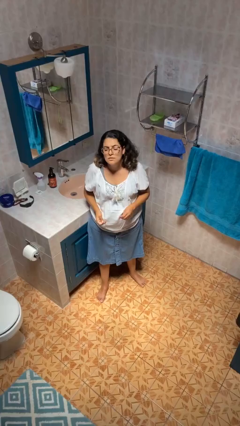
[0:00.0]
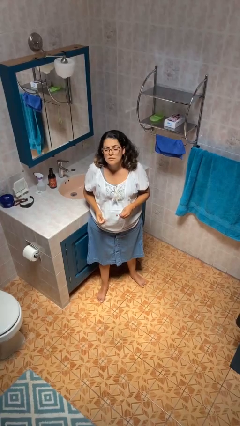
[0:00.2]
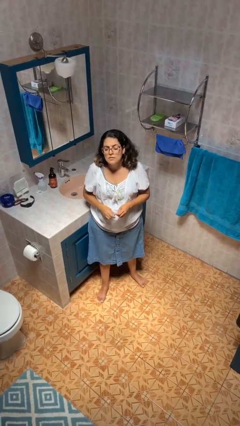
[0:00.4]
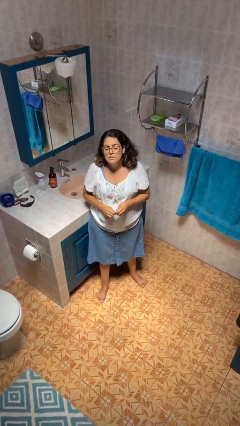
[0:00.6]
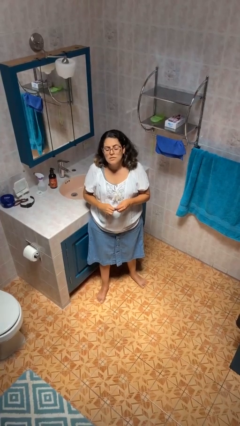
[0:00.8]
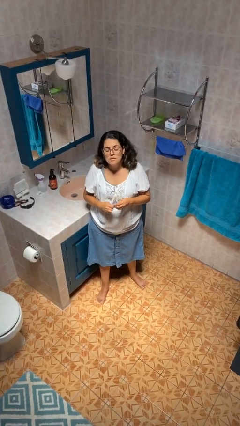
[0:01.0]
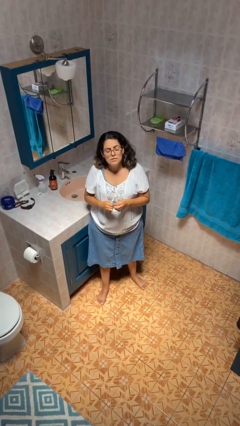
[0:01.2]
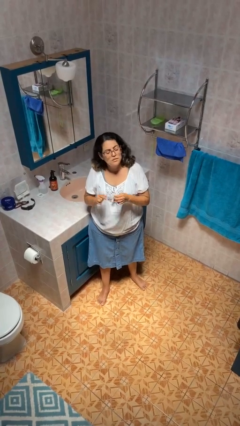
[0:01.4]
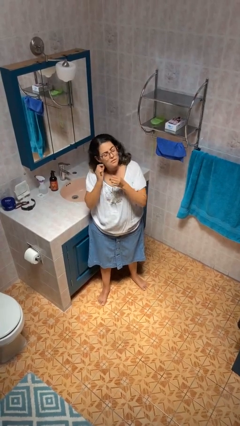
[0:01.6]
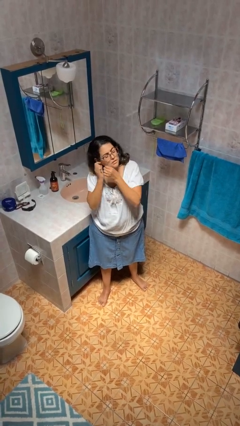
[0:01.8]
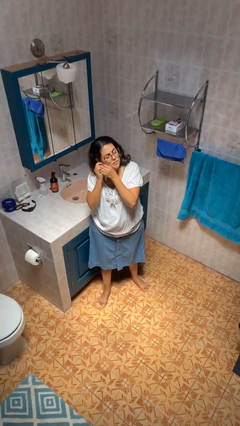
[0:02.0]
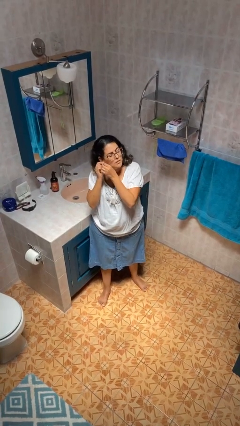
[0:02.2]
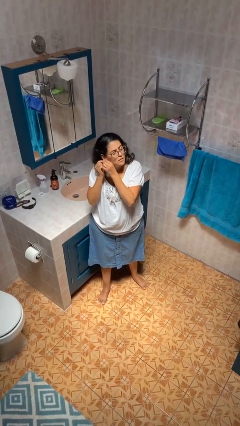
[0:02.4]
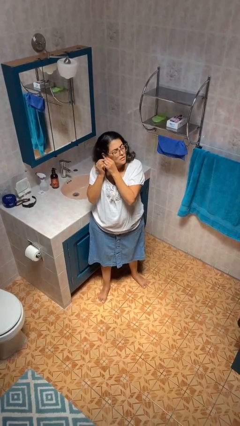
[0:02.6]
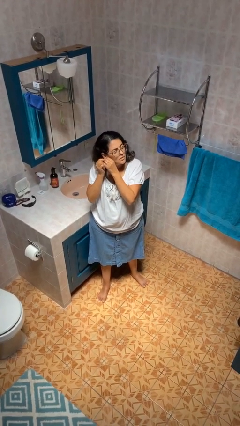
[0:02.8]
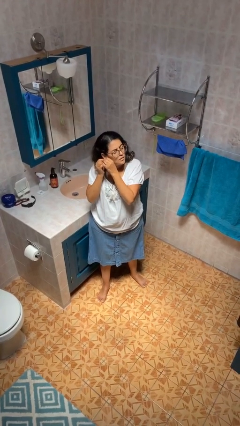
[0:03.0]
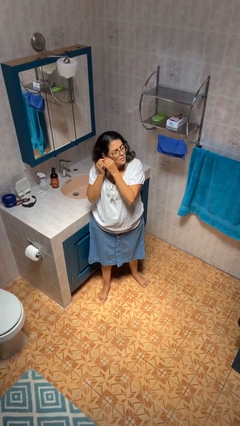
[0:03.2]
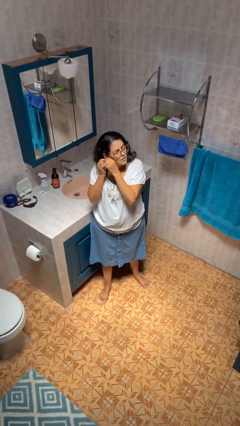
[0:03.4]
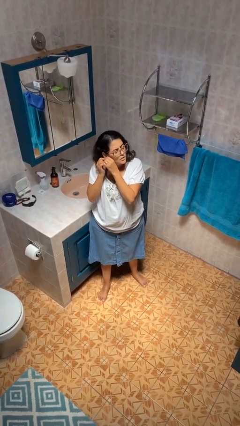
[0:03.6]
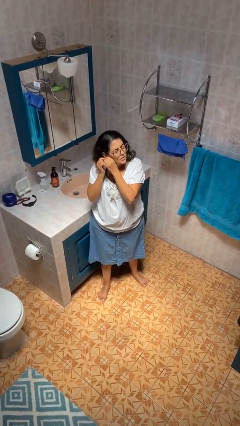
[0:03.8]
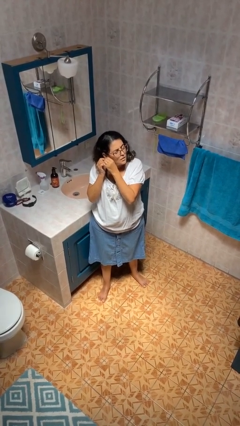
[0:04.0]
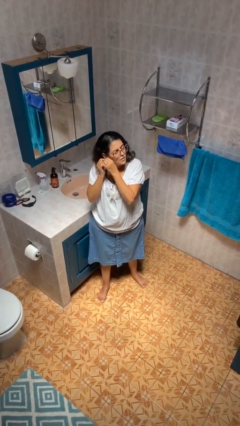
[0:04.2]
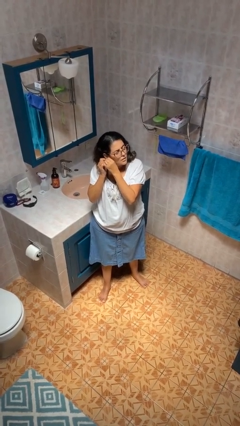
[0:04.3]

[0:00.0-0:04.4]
person puts on earrings

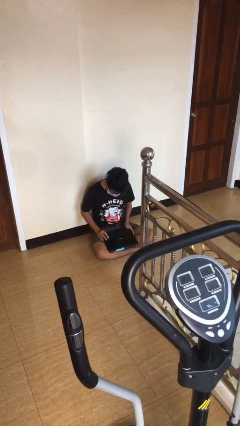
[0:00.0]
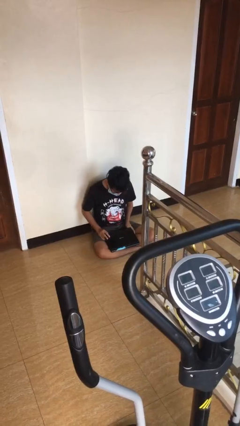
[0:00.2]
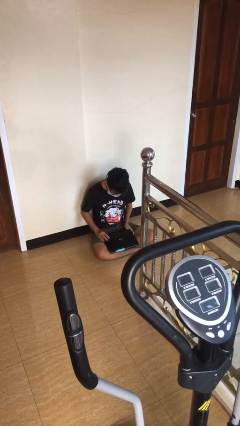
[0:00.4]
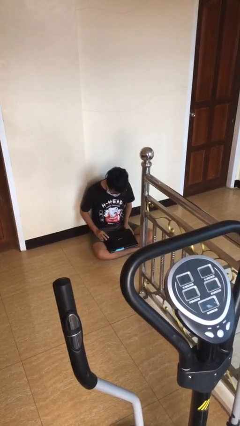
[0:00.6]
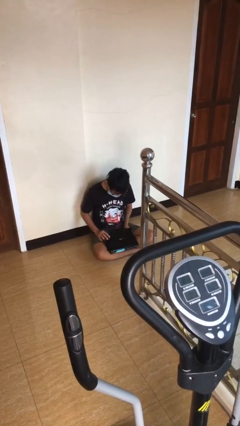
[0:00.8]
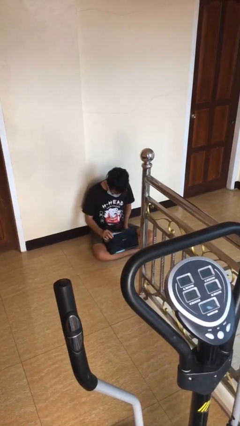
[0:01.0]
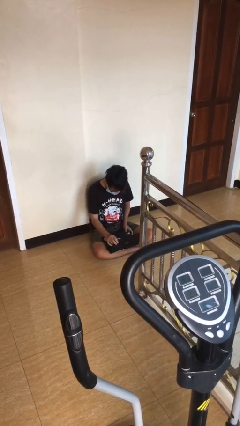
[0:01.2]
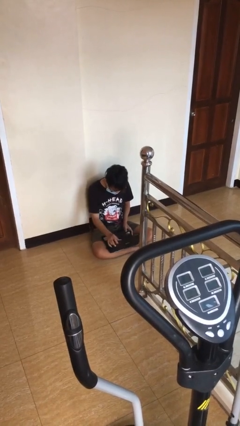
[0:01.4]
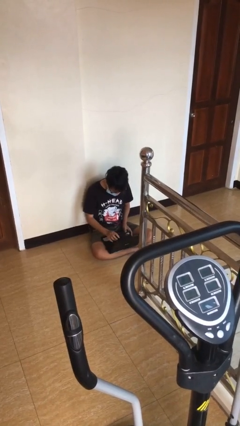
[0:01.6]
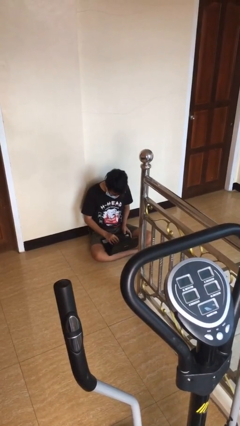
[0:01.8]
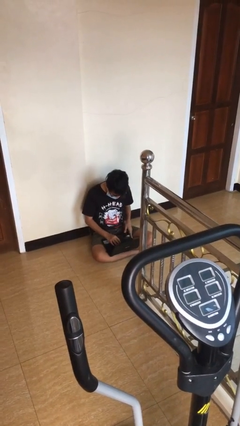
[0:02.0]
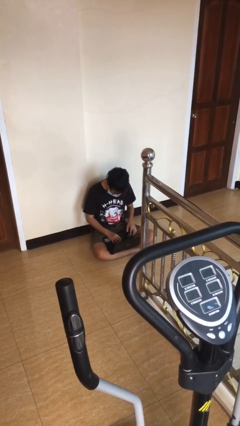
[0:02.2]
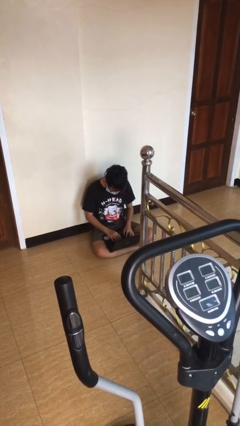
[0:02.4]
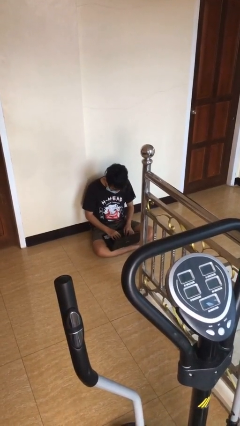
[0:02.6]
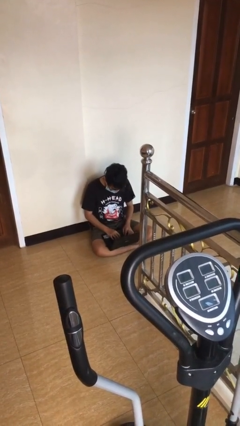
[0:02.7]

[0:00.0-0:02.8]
person interacts with laptop

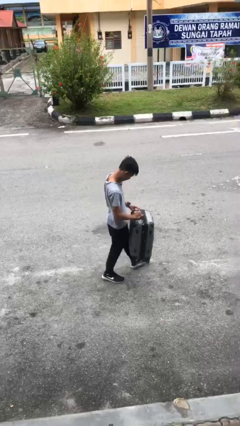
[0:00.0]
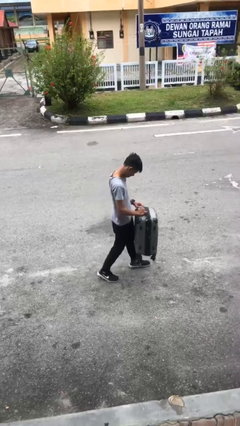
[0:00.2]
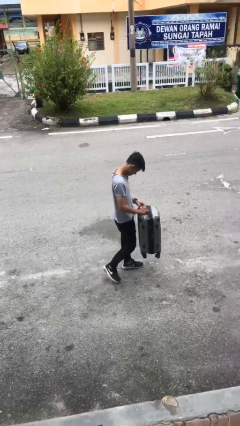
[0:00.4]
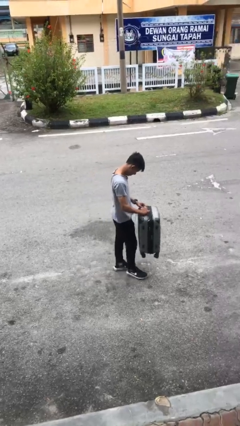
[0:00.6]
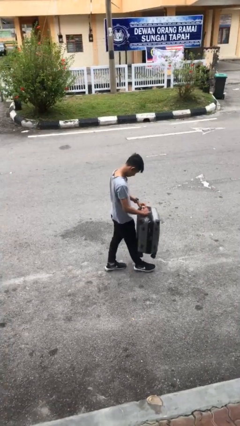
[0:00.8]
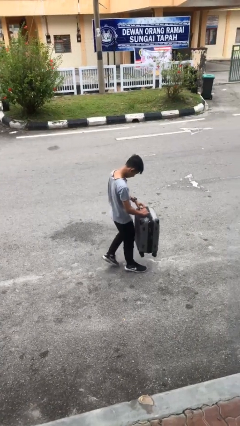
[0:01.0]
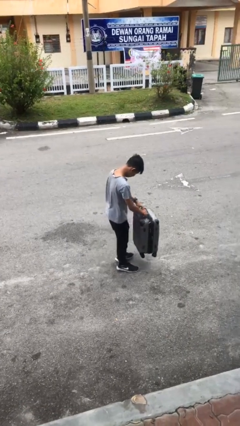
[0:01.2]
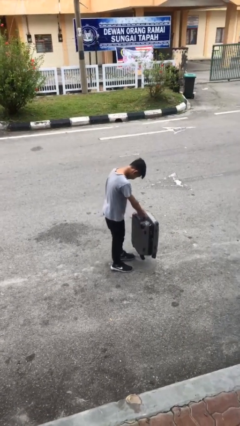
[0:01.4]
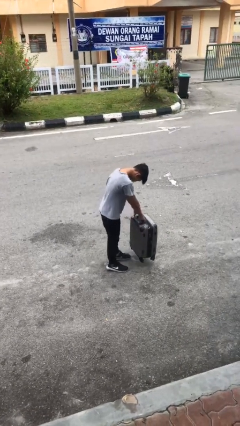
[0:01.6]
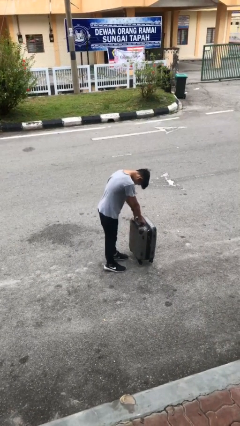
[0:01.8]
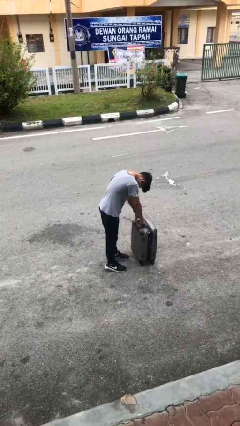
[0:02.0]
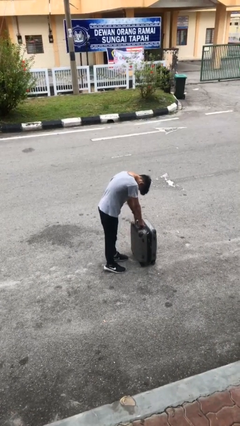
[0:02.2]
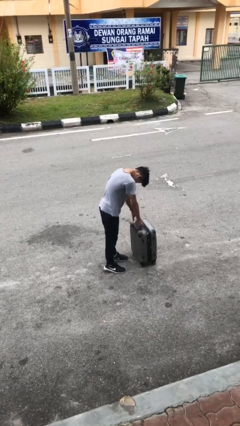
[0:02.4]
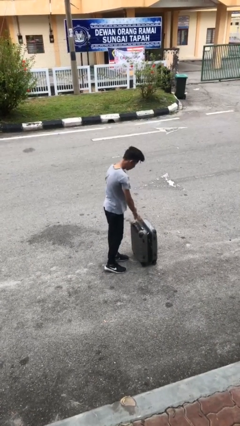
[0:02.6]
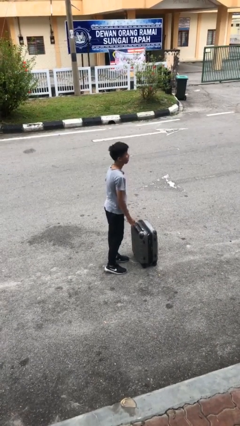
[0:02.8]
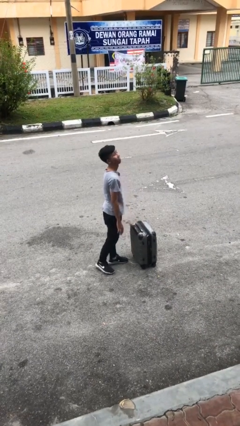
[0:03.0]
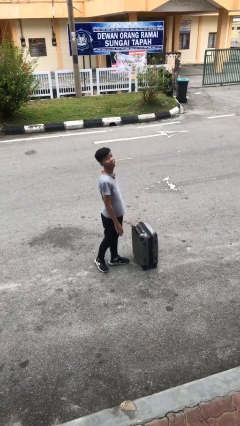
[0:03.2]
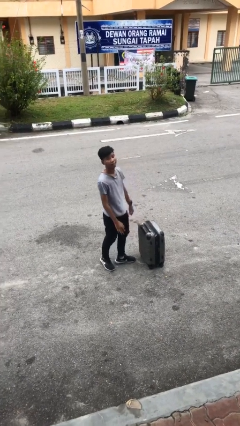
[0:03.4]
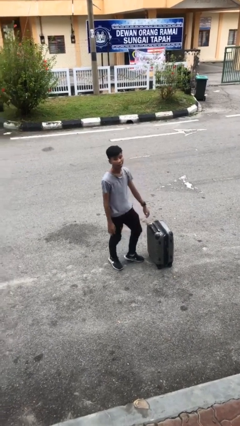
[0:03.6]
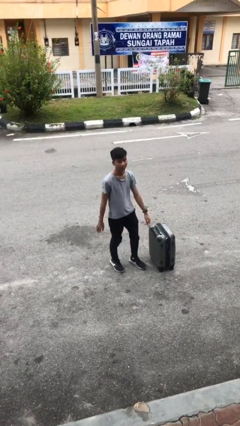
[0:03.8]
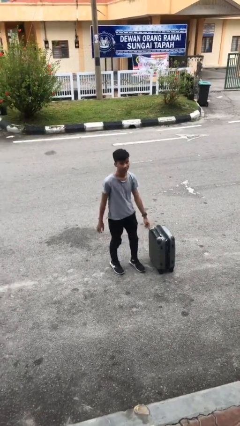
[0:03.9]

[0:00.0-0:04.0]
person puts down object on floor

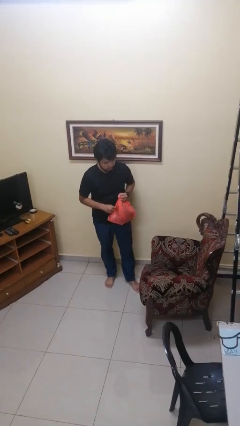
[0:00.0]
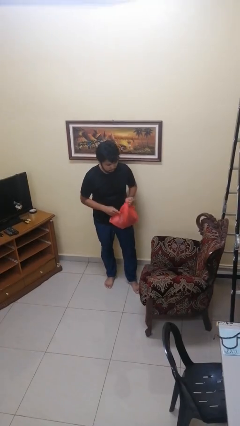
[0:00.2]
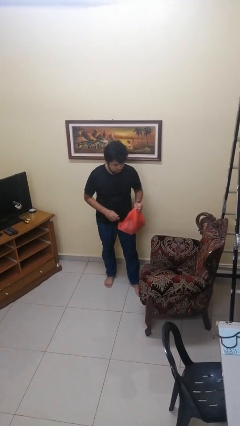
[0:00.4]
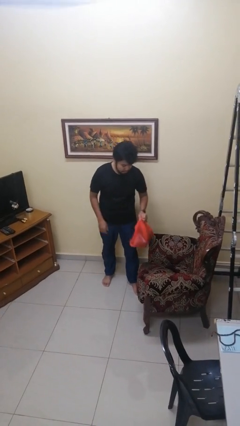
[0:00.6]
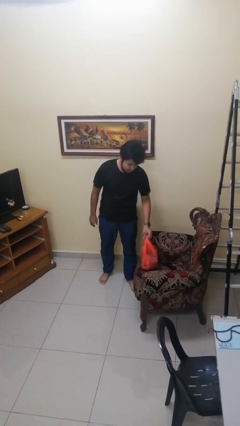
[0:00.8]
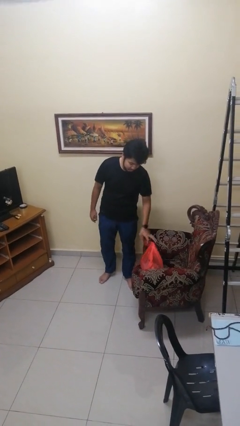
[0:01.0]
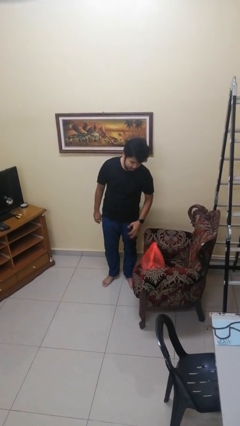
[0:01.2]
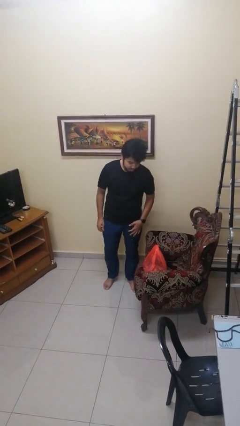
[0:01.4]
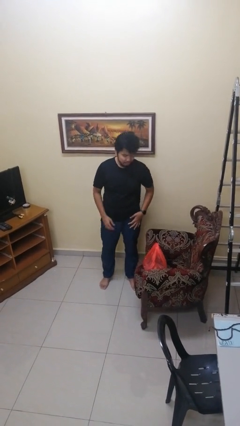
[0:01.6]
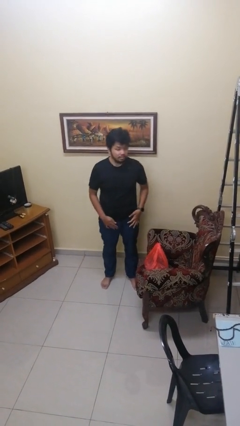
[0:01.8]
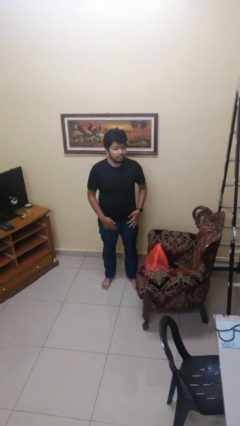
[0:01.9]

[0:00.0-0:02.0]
person puts down object on couch

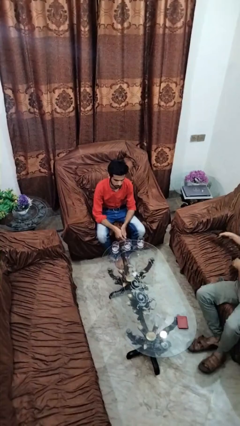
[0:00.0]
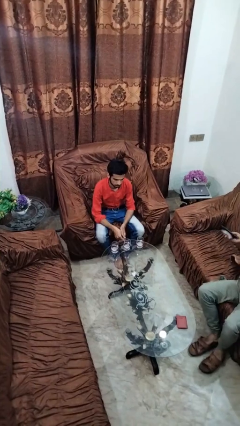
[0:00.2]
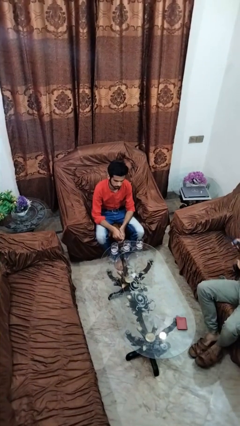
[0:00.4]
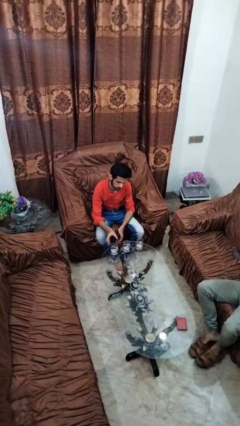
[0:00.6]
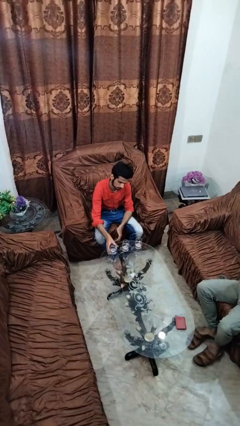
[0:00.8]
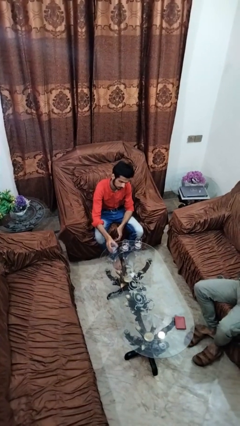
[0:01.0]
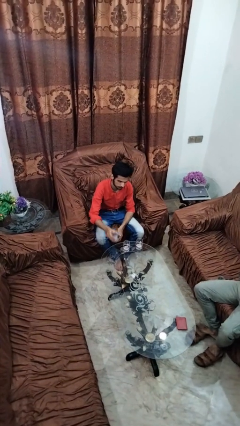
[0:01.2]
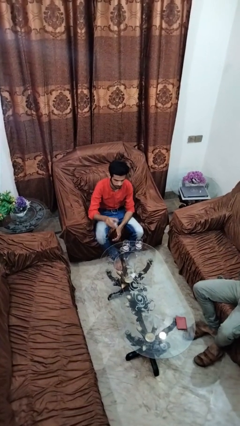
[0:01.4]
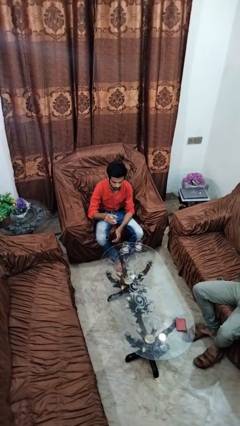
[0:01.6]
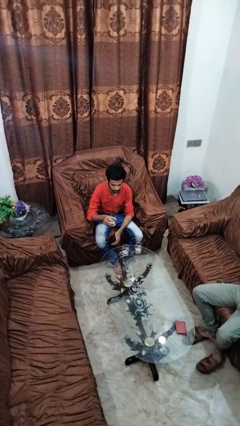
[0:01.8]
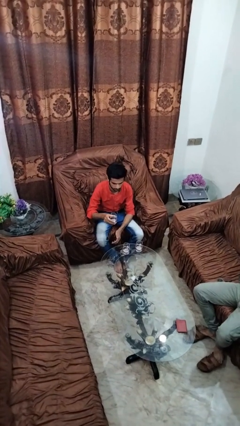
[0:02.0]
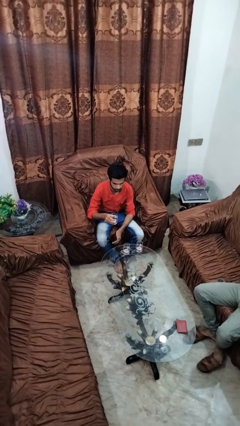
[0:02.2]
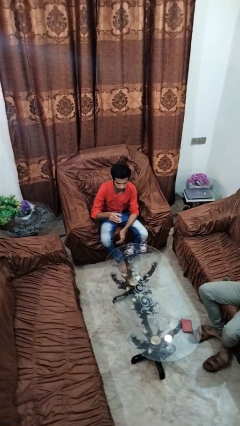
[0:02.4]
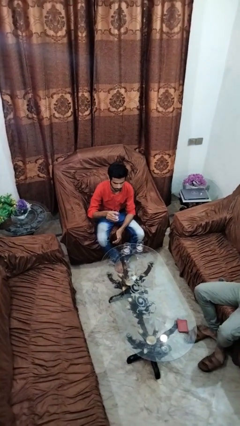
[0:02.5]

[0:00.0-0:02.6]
person picks up object from table

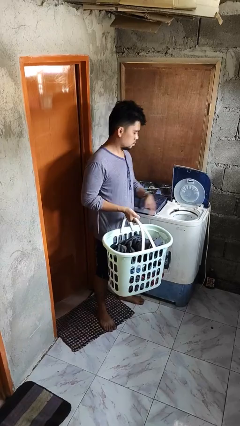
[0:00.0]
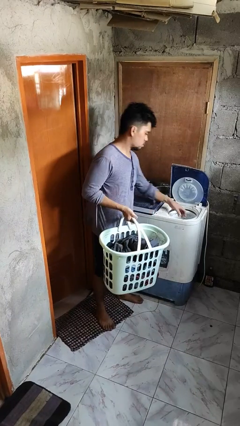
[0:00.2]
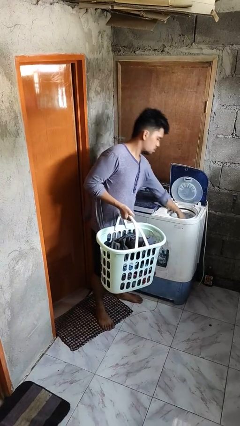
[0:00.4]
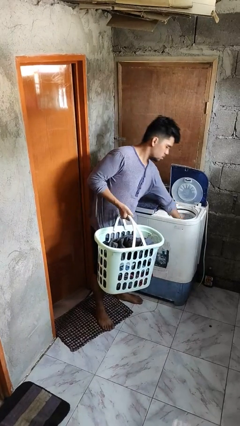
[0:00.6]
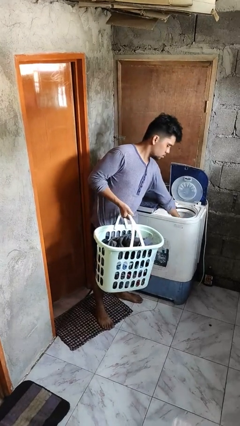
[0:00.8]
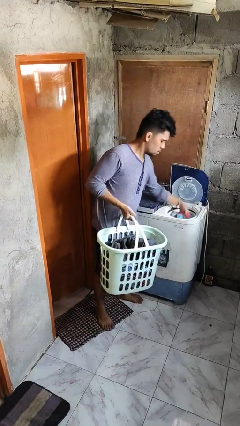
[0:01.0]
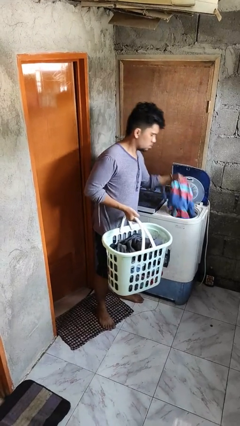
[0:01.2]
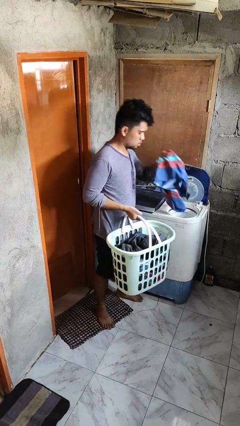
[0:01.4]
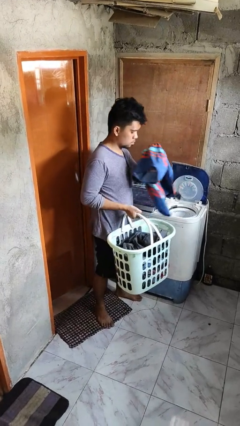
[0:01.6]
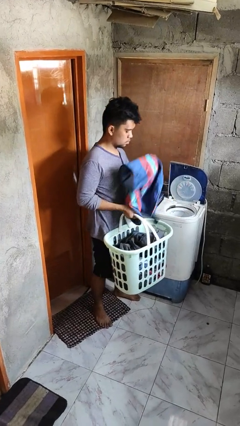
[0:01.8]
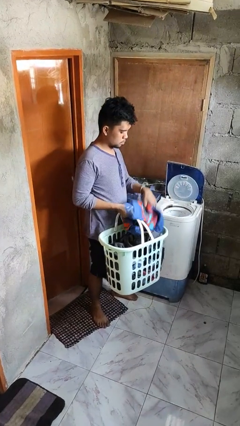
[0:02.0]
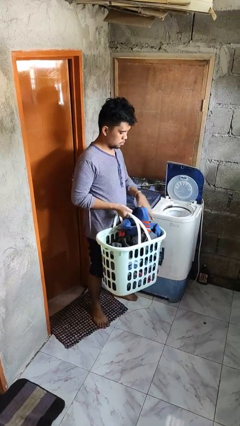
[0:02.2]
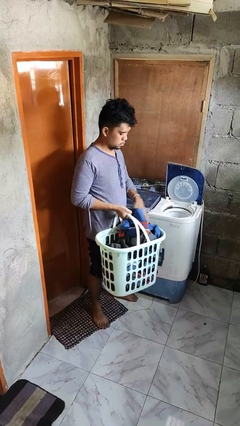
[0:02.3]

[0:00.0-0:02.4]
person unloads dryer
